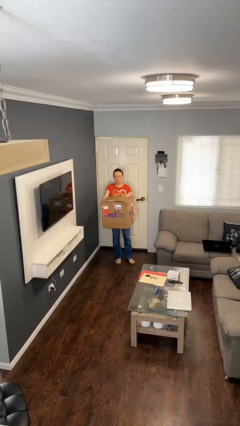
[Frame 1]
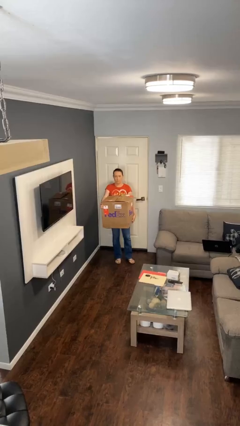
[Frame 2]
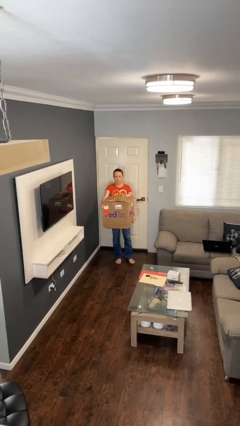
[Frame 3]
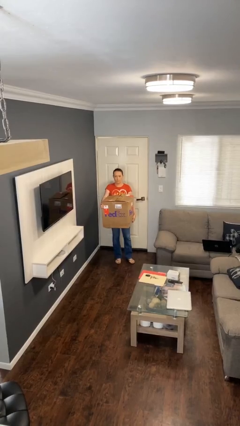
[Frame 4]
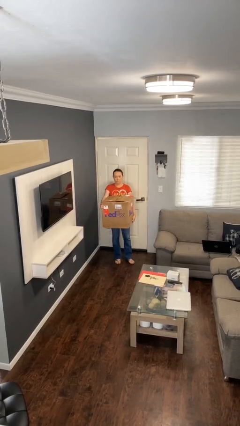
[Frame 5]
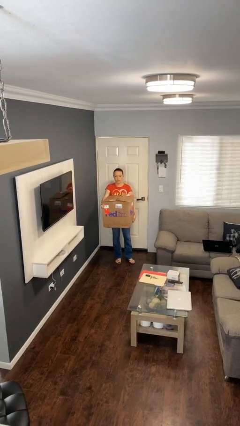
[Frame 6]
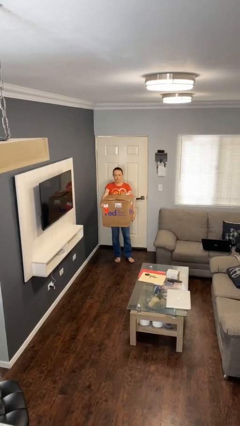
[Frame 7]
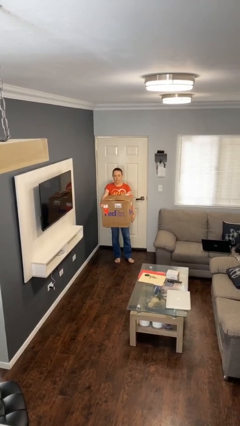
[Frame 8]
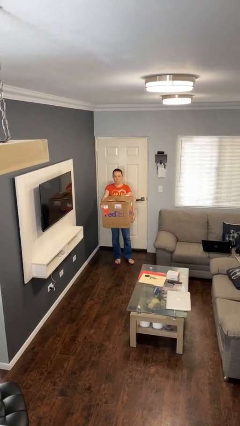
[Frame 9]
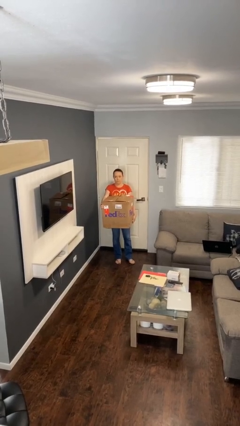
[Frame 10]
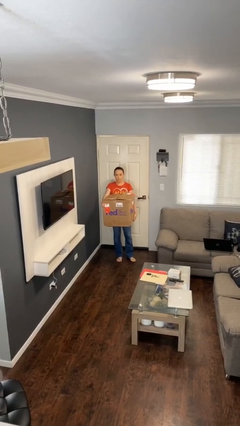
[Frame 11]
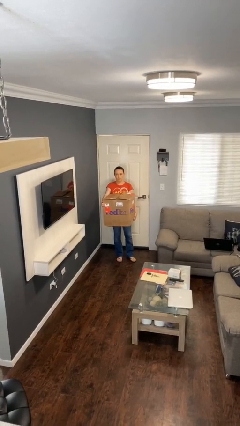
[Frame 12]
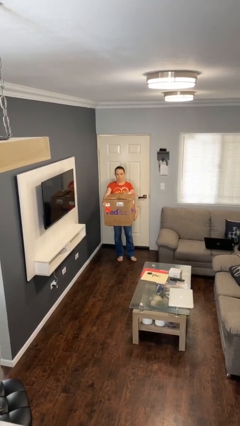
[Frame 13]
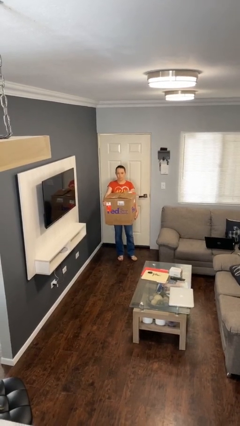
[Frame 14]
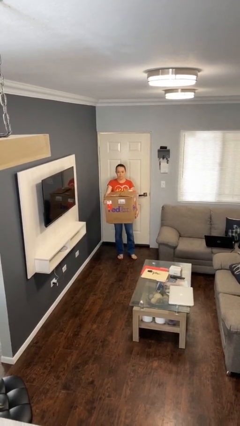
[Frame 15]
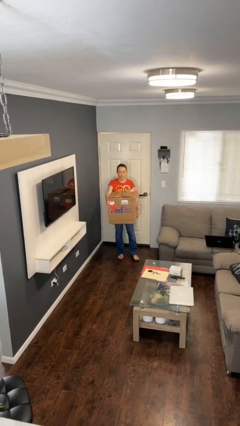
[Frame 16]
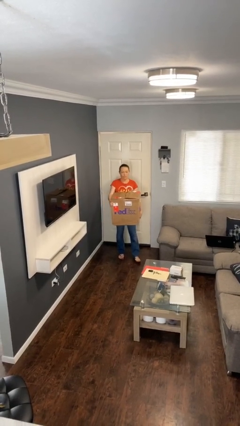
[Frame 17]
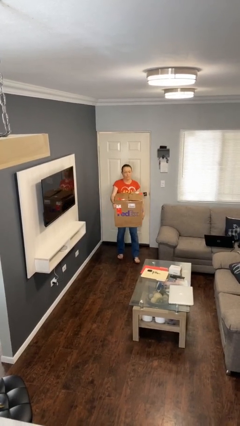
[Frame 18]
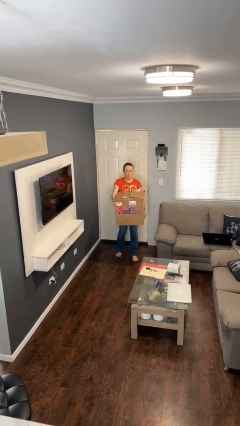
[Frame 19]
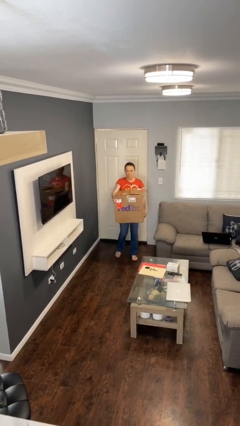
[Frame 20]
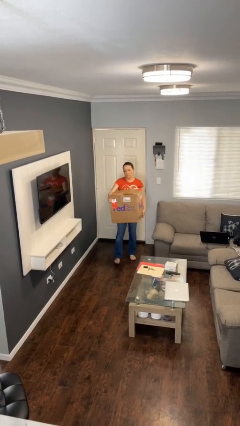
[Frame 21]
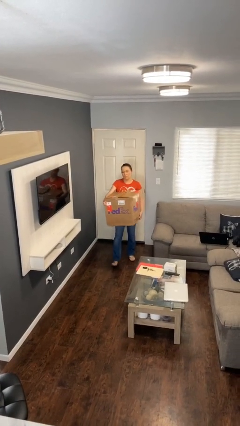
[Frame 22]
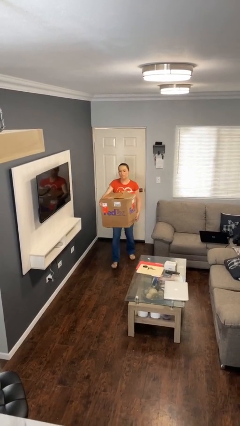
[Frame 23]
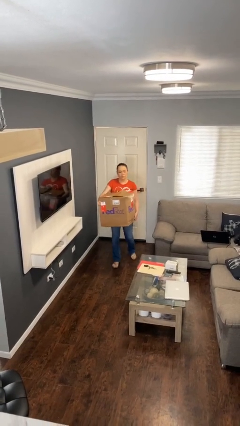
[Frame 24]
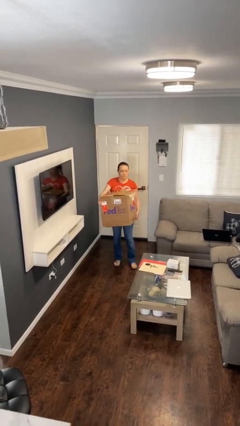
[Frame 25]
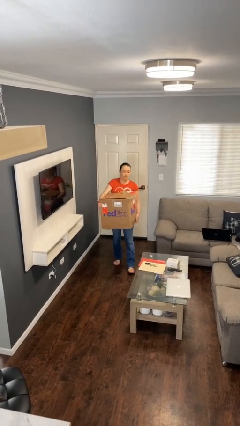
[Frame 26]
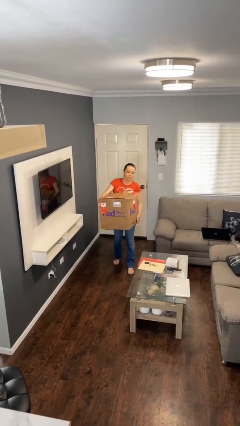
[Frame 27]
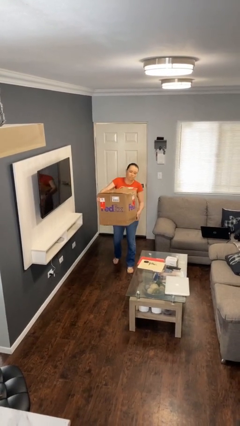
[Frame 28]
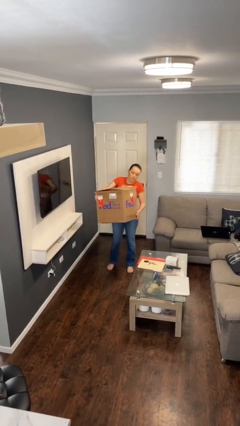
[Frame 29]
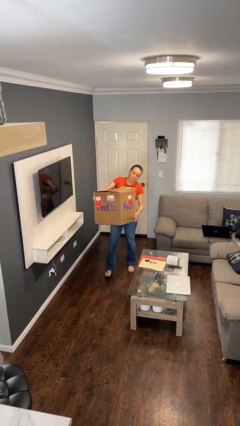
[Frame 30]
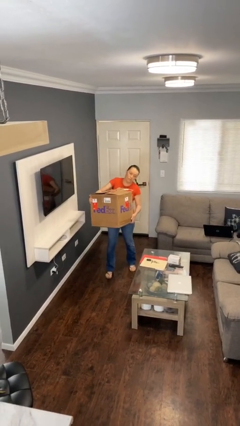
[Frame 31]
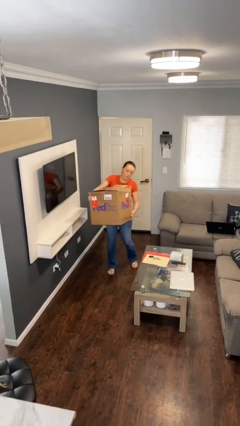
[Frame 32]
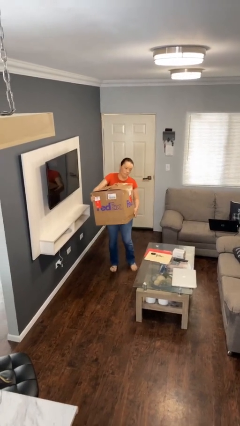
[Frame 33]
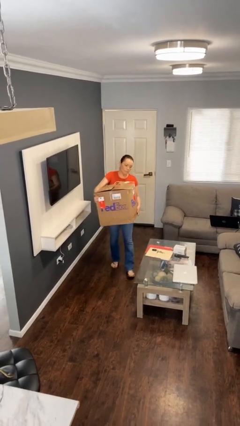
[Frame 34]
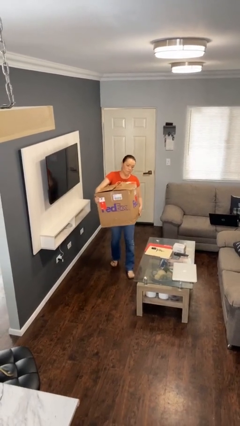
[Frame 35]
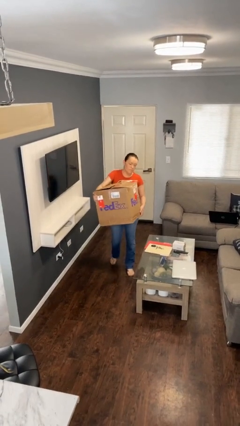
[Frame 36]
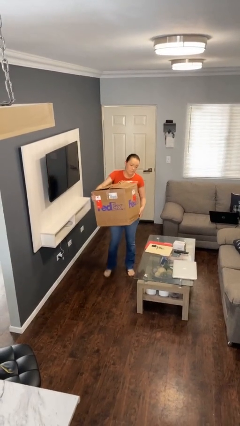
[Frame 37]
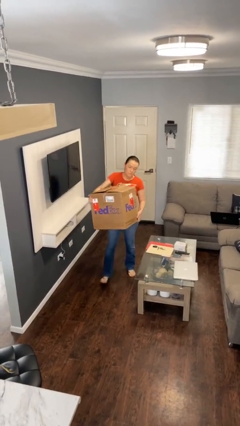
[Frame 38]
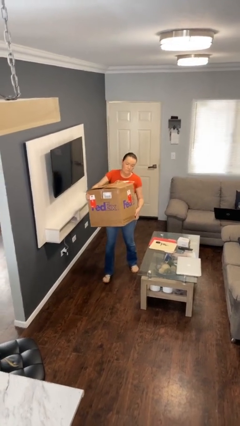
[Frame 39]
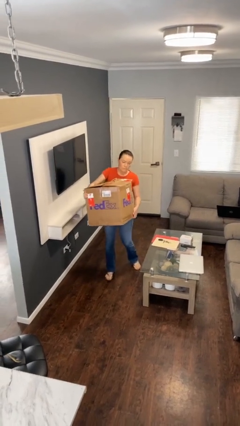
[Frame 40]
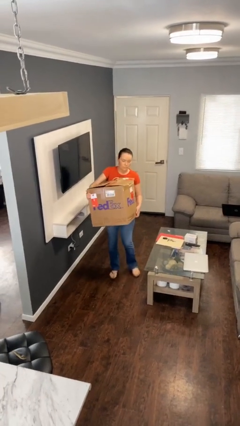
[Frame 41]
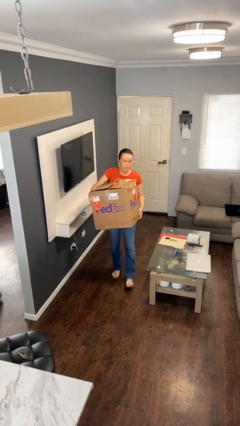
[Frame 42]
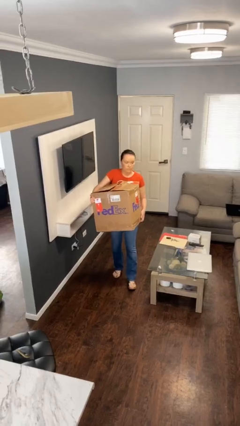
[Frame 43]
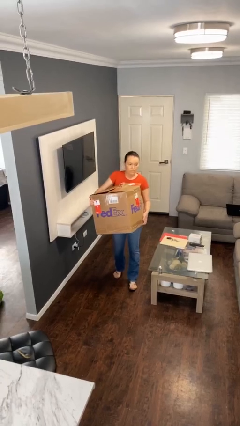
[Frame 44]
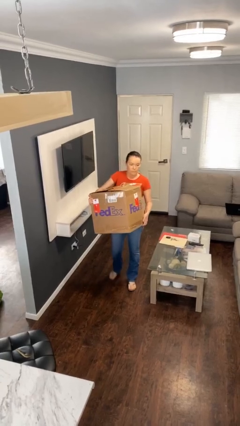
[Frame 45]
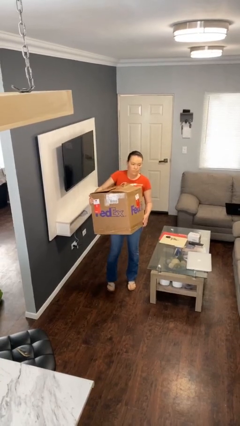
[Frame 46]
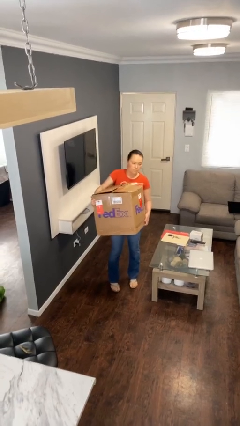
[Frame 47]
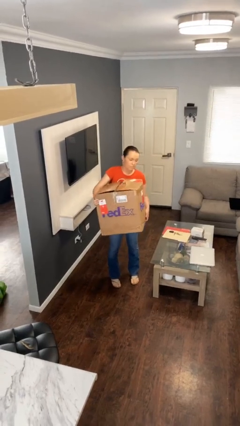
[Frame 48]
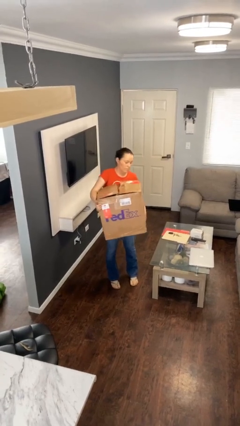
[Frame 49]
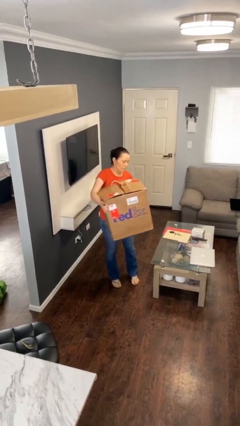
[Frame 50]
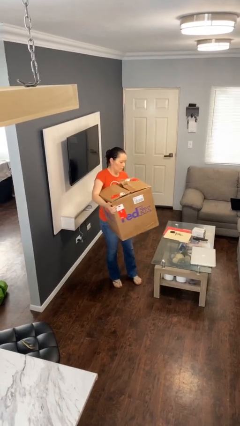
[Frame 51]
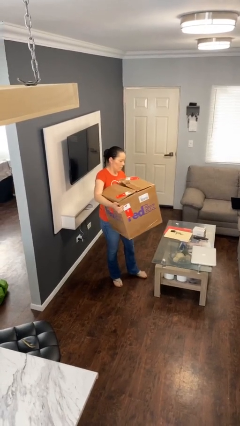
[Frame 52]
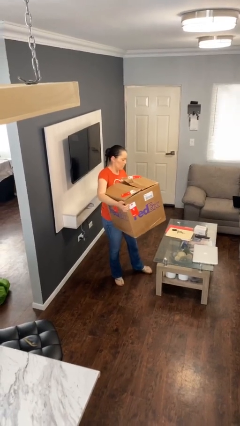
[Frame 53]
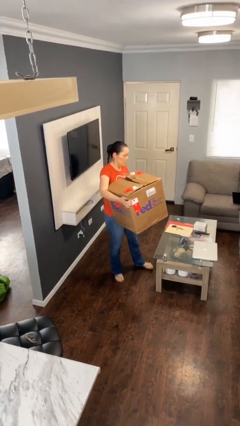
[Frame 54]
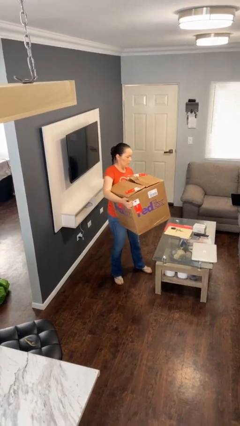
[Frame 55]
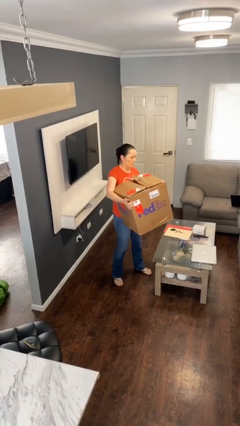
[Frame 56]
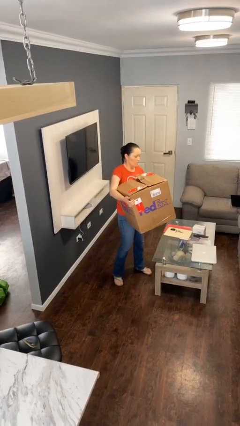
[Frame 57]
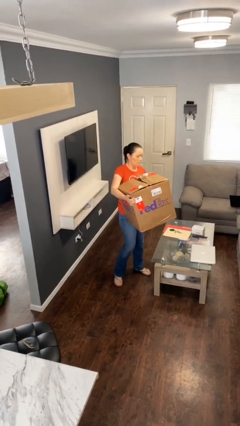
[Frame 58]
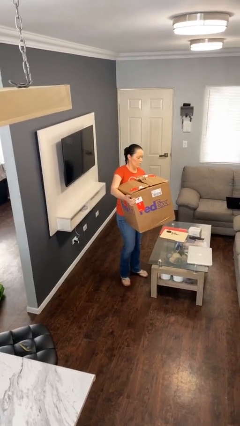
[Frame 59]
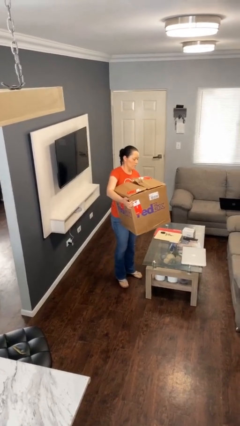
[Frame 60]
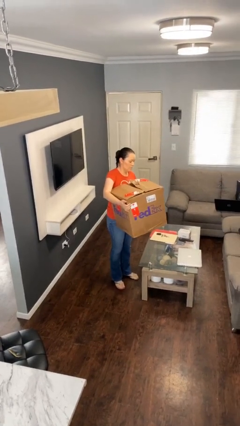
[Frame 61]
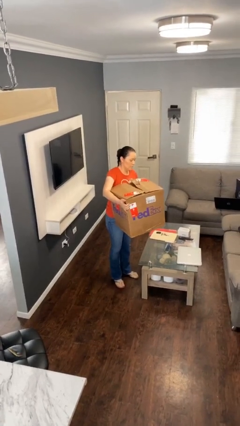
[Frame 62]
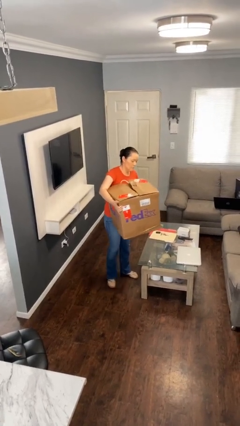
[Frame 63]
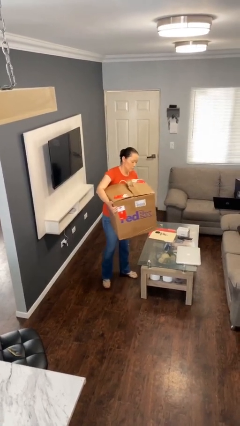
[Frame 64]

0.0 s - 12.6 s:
person carries heavy object

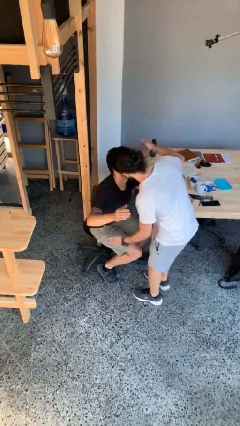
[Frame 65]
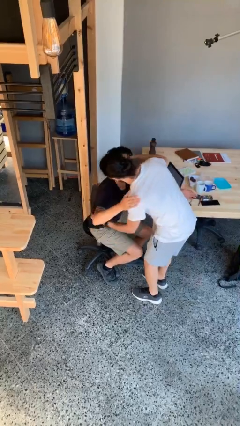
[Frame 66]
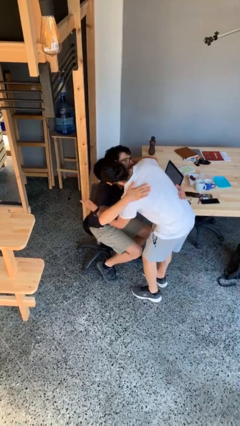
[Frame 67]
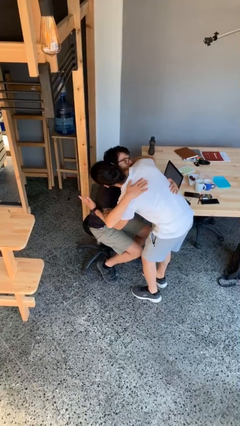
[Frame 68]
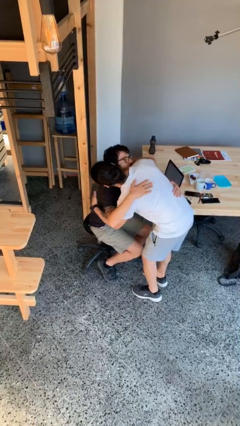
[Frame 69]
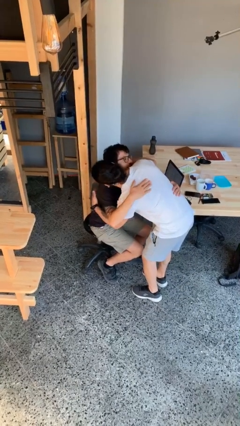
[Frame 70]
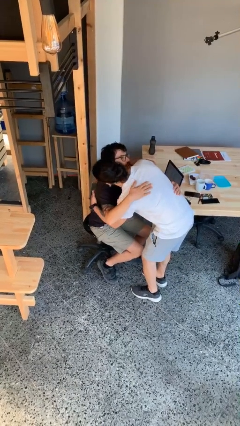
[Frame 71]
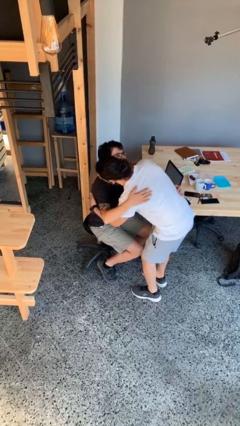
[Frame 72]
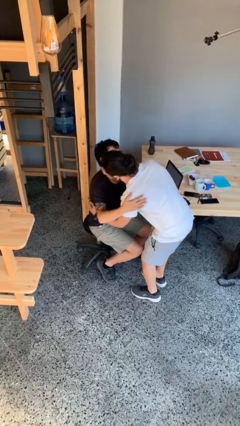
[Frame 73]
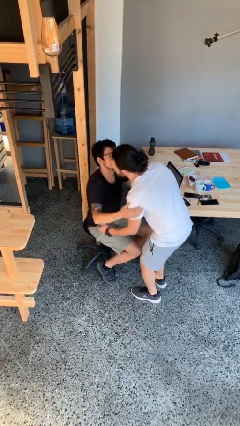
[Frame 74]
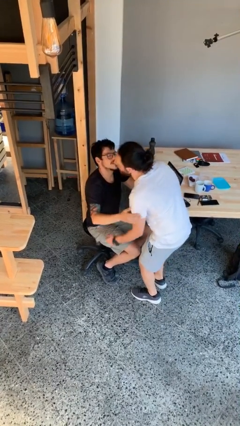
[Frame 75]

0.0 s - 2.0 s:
person embraces person

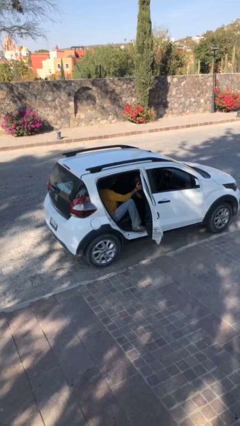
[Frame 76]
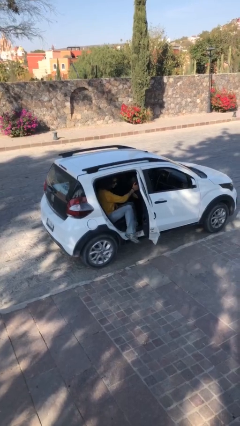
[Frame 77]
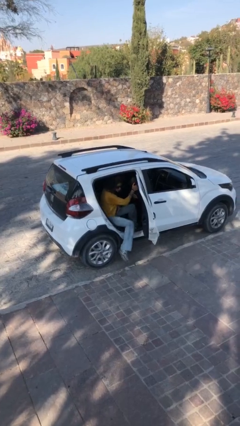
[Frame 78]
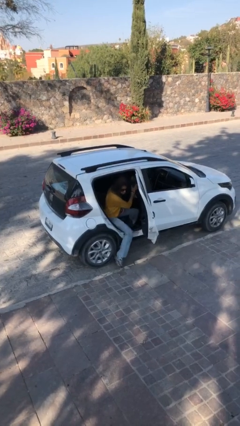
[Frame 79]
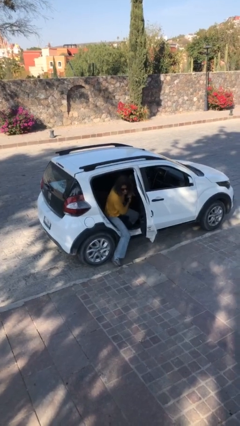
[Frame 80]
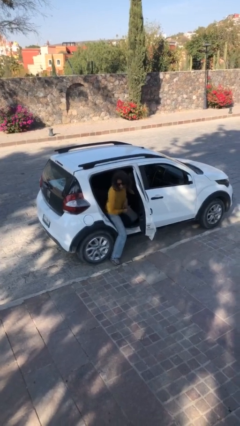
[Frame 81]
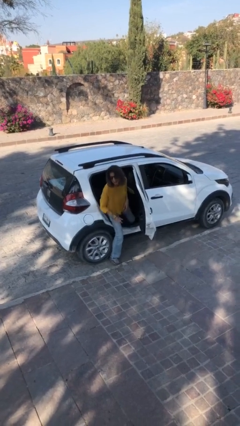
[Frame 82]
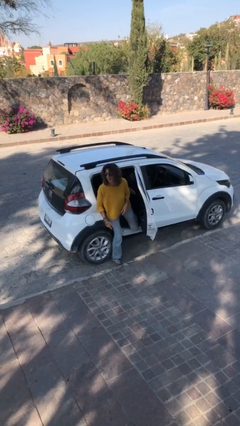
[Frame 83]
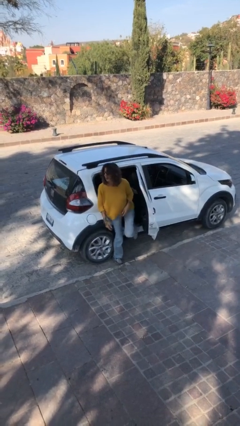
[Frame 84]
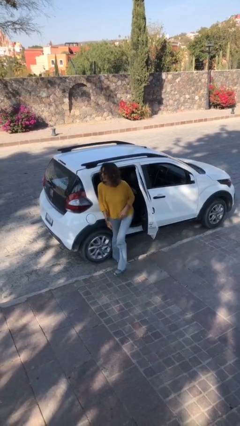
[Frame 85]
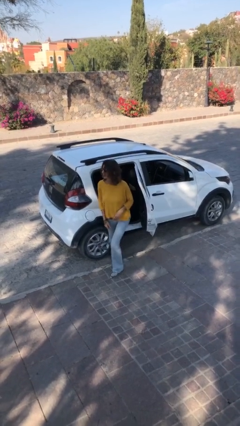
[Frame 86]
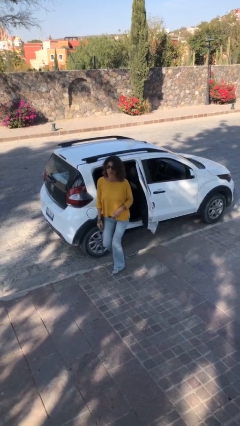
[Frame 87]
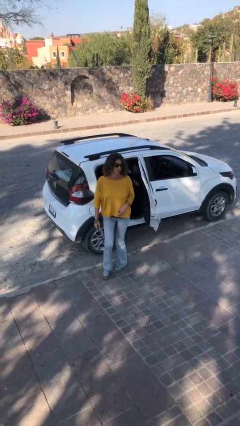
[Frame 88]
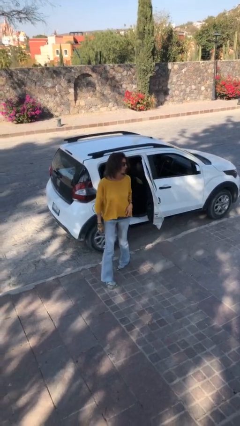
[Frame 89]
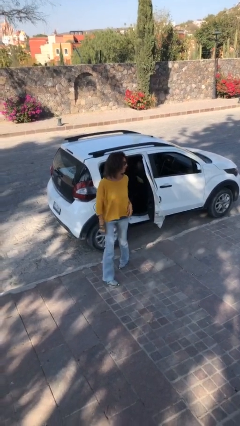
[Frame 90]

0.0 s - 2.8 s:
person exits car

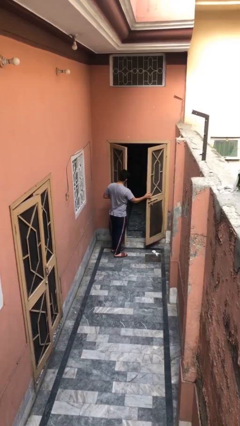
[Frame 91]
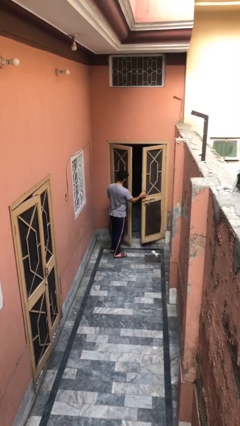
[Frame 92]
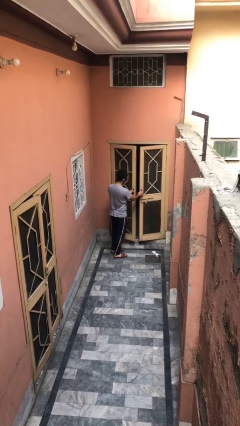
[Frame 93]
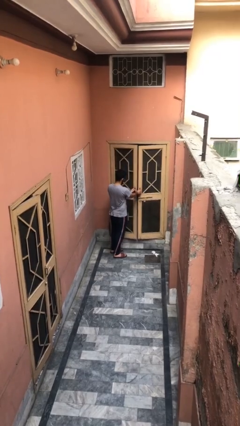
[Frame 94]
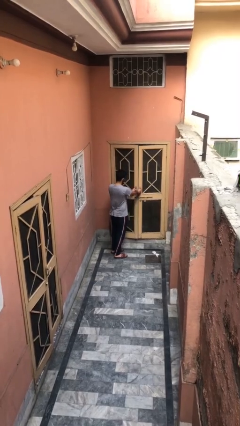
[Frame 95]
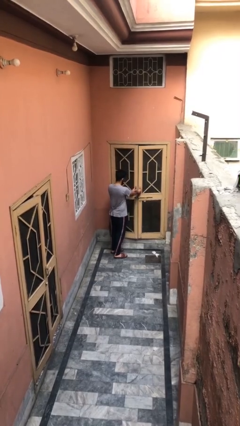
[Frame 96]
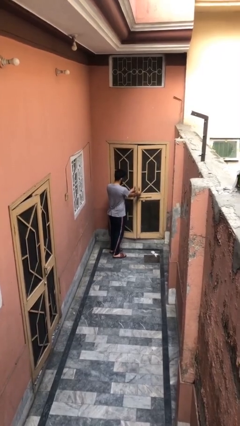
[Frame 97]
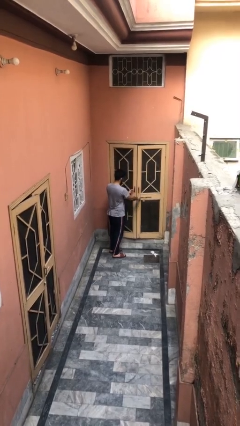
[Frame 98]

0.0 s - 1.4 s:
person closes gate
